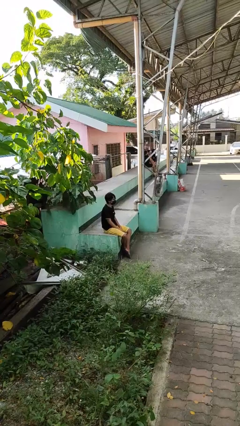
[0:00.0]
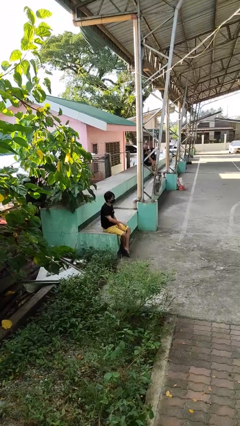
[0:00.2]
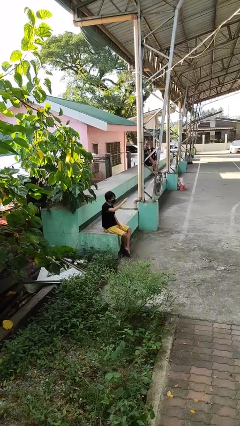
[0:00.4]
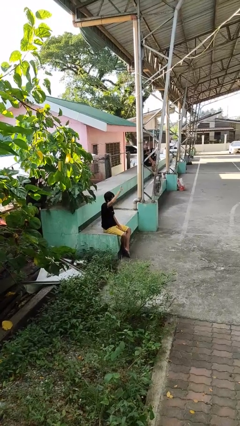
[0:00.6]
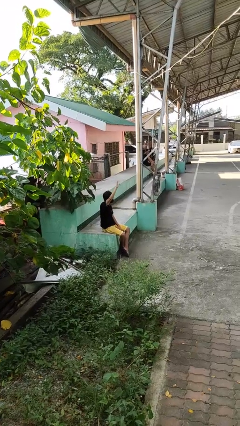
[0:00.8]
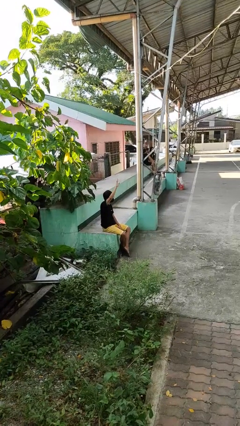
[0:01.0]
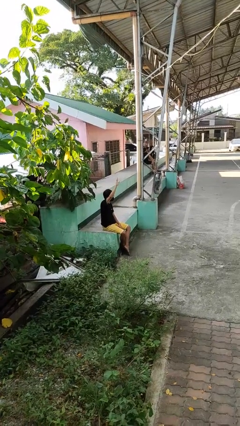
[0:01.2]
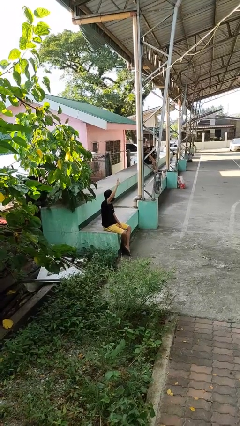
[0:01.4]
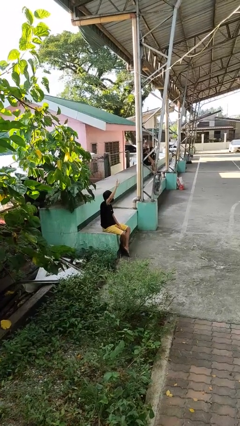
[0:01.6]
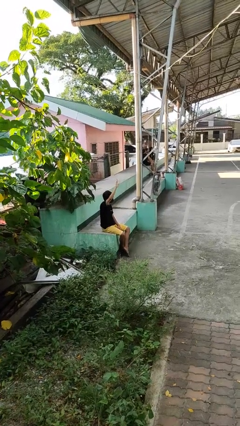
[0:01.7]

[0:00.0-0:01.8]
person gestures raise hand

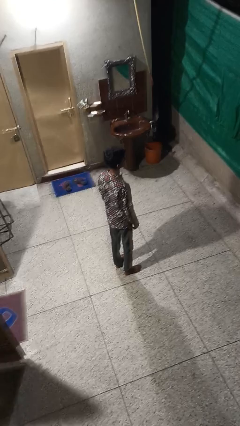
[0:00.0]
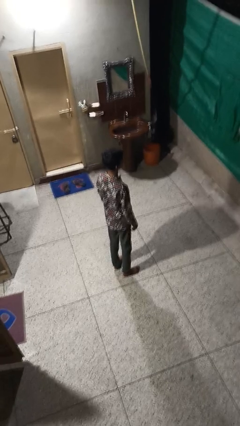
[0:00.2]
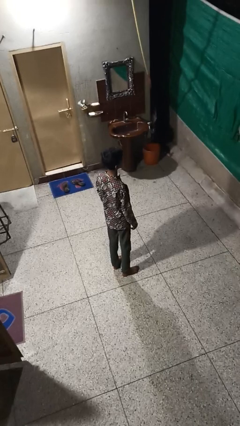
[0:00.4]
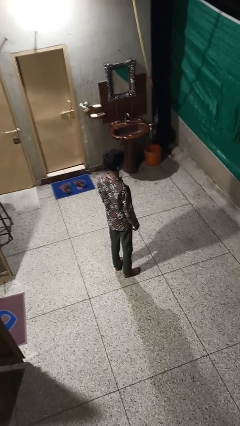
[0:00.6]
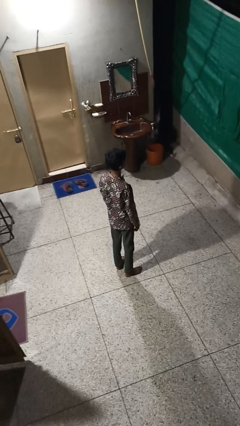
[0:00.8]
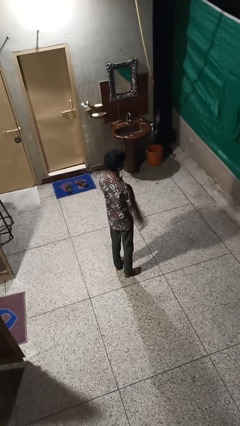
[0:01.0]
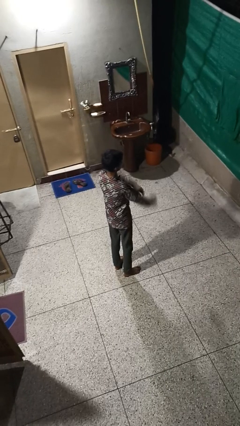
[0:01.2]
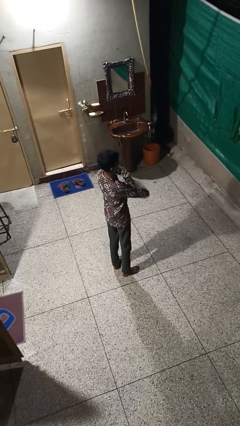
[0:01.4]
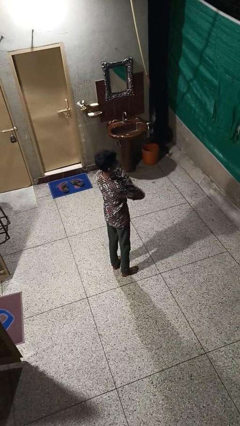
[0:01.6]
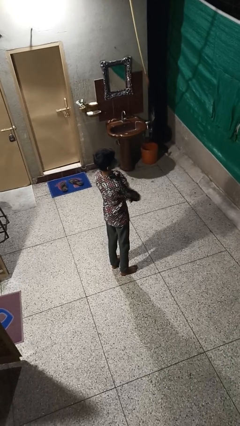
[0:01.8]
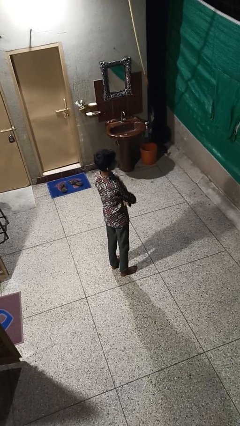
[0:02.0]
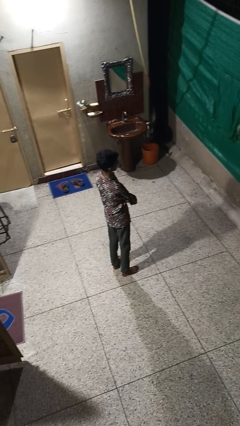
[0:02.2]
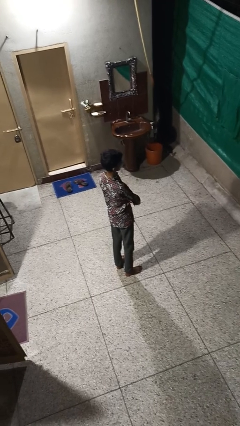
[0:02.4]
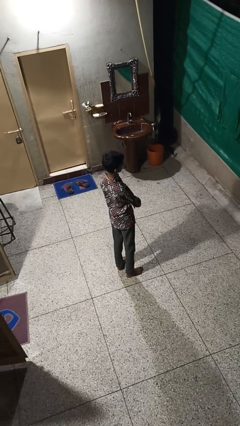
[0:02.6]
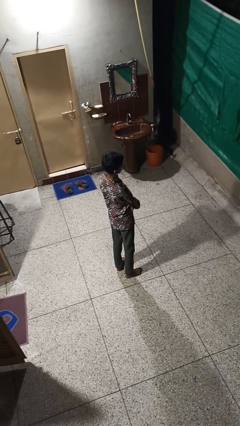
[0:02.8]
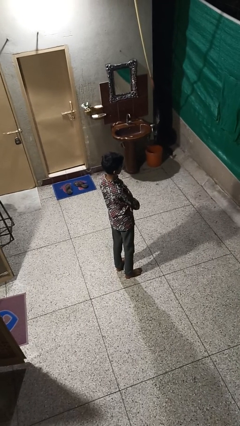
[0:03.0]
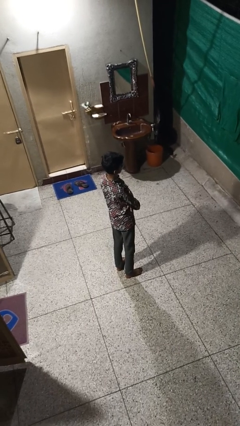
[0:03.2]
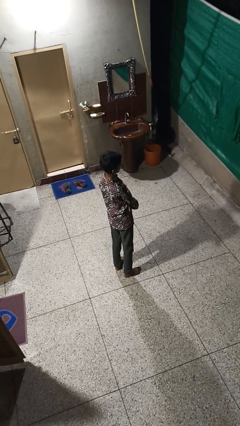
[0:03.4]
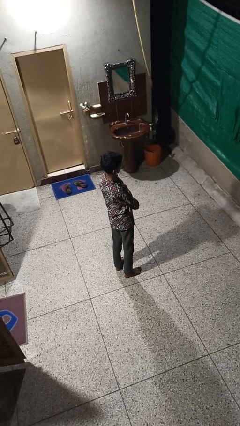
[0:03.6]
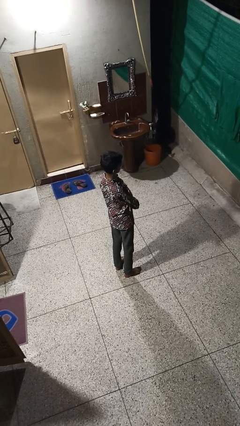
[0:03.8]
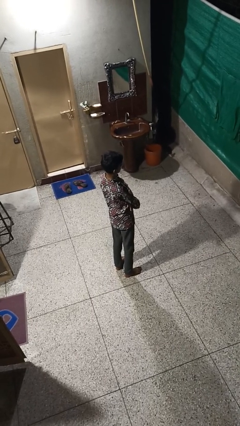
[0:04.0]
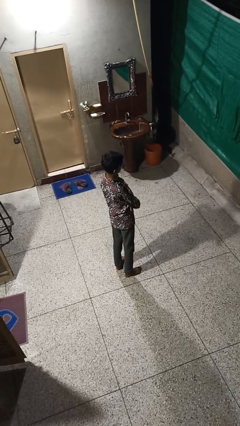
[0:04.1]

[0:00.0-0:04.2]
person crosses arms

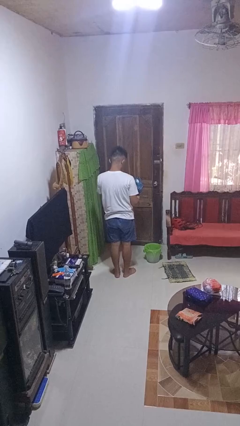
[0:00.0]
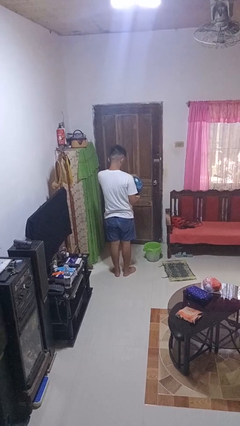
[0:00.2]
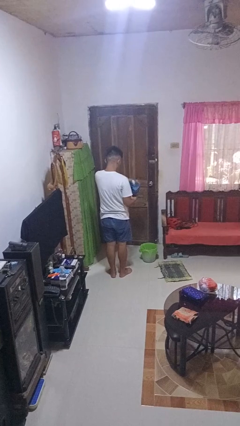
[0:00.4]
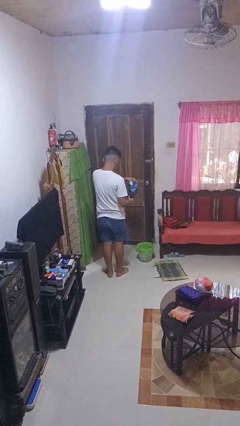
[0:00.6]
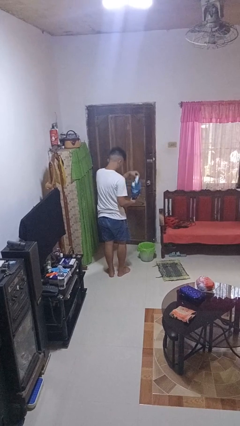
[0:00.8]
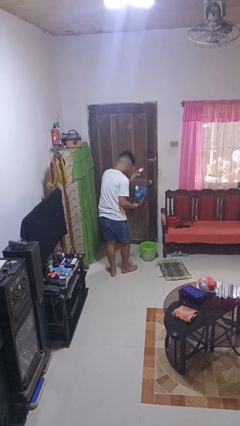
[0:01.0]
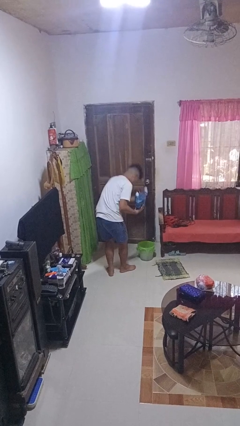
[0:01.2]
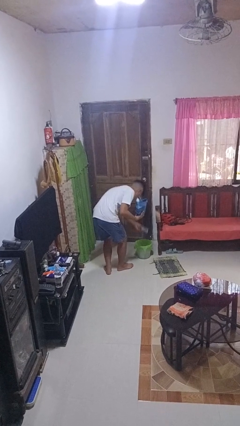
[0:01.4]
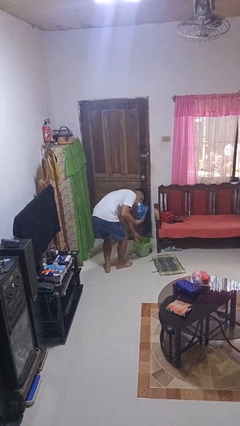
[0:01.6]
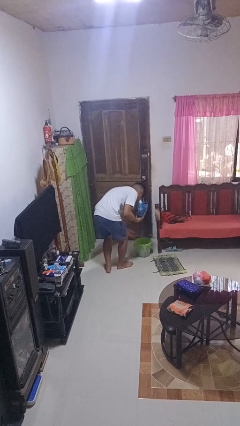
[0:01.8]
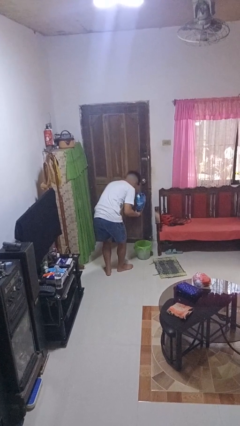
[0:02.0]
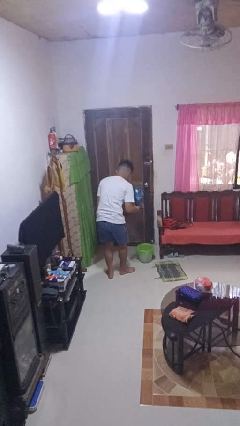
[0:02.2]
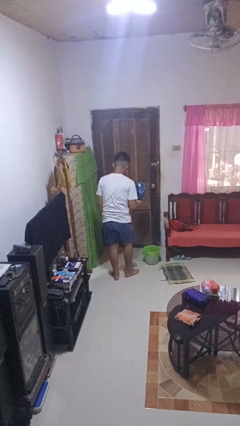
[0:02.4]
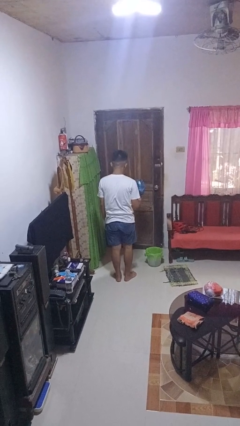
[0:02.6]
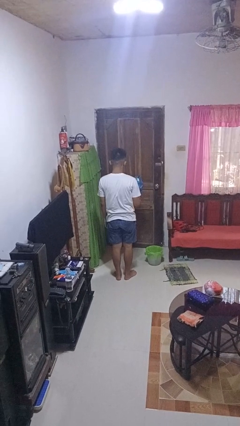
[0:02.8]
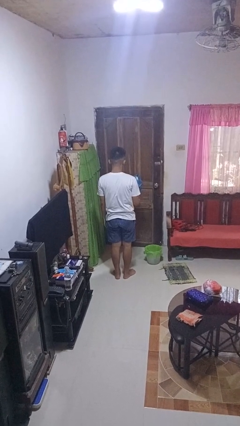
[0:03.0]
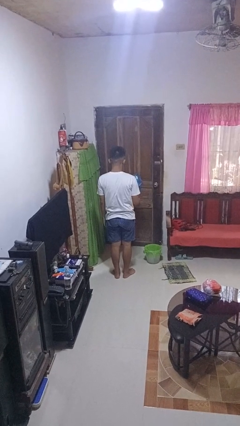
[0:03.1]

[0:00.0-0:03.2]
person discards trash

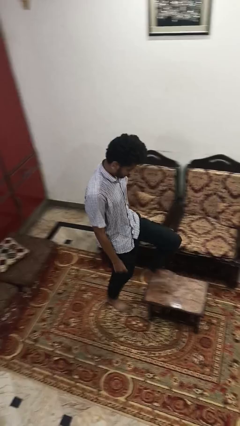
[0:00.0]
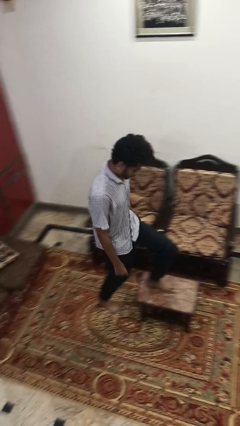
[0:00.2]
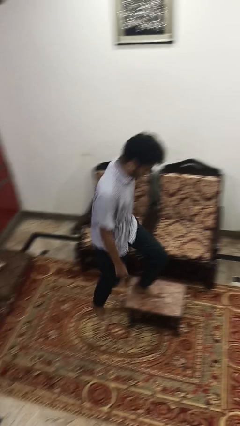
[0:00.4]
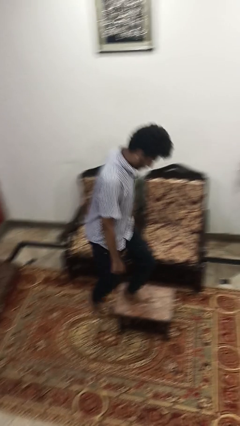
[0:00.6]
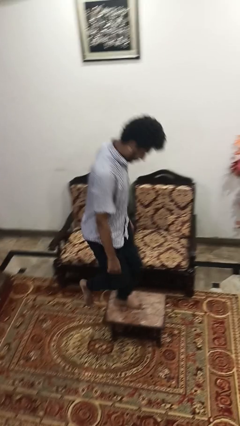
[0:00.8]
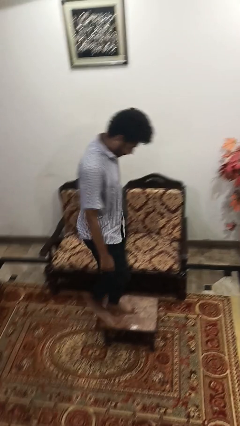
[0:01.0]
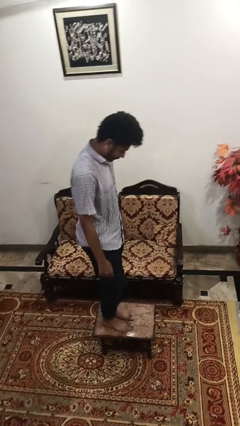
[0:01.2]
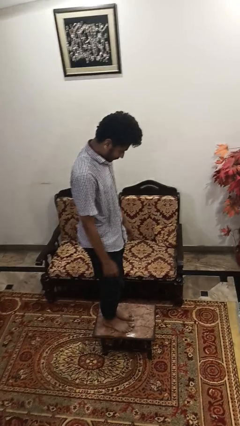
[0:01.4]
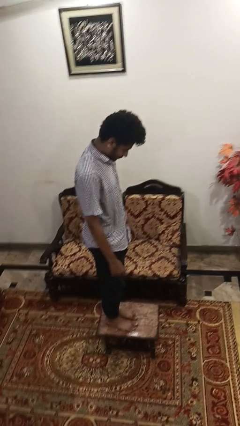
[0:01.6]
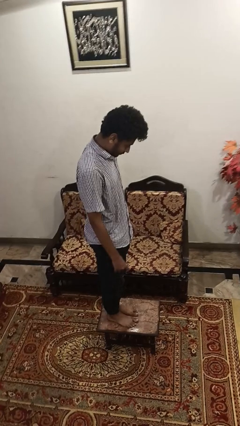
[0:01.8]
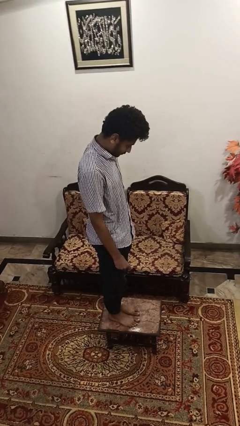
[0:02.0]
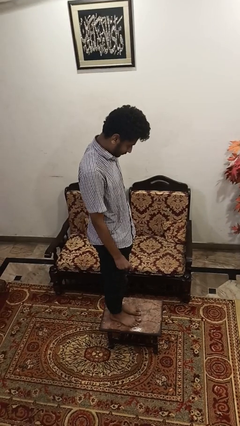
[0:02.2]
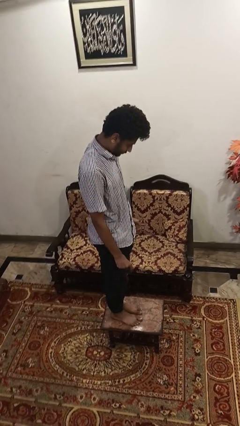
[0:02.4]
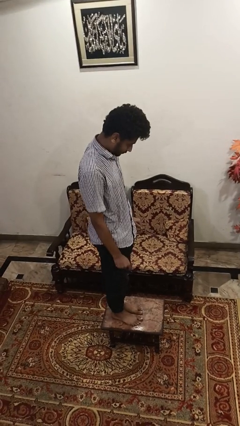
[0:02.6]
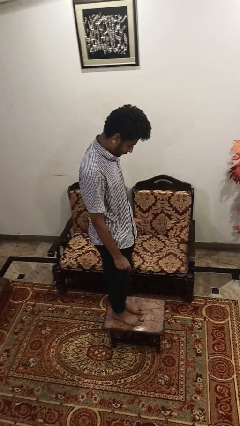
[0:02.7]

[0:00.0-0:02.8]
person climbs on table

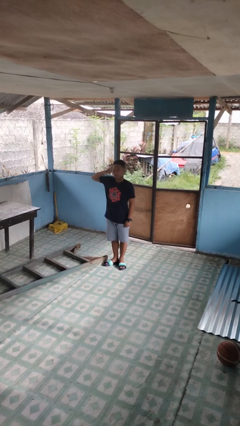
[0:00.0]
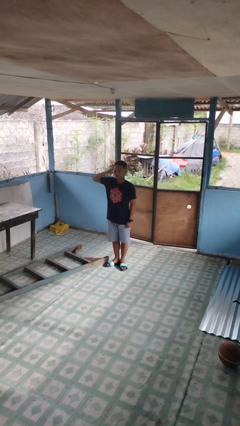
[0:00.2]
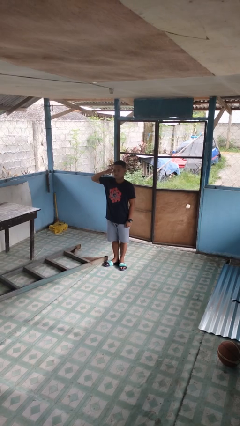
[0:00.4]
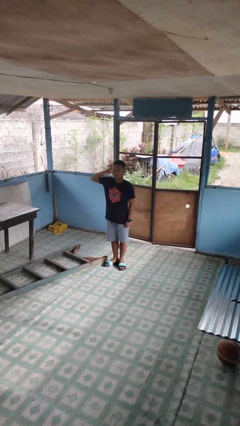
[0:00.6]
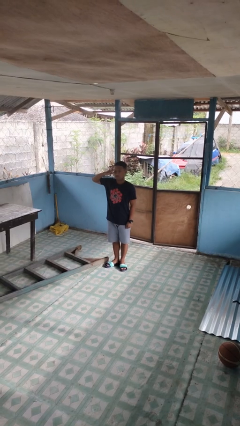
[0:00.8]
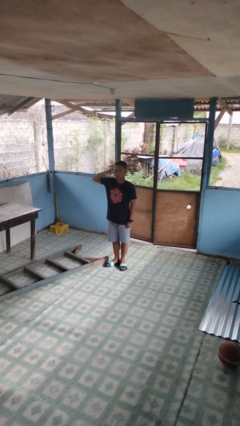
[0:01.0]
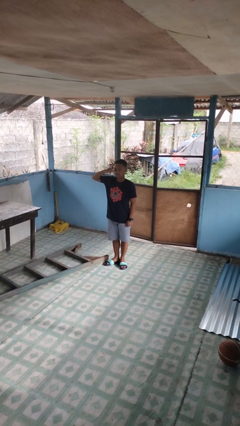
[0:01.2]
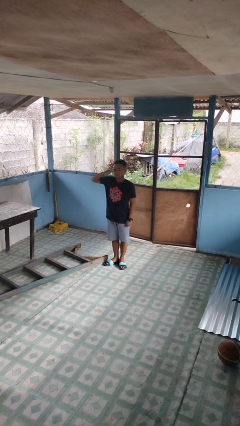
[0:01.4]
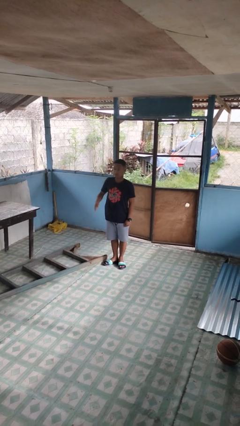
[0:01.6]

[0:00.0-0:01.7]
person salutes

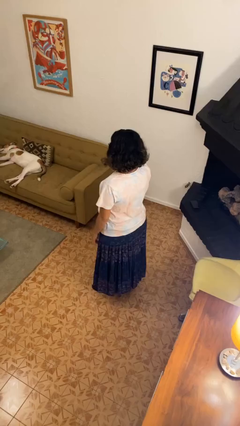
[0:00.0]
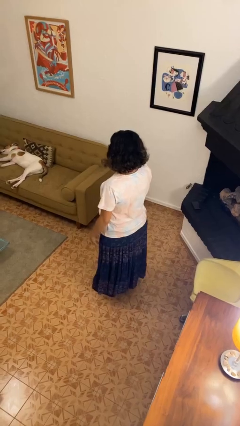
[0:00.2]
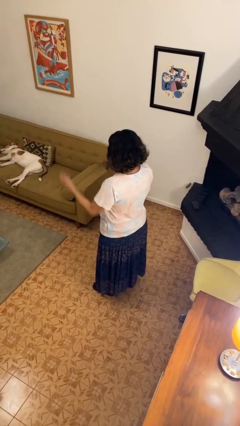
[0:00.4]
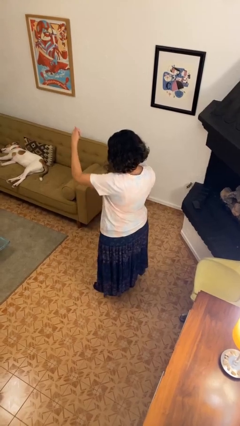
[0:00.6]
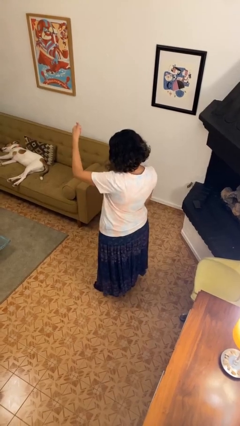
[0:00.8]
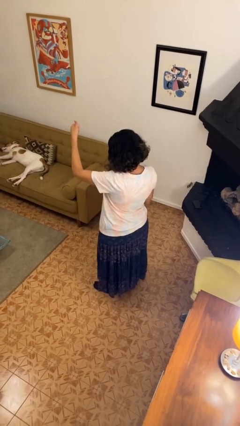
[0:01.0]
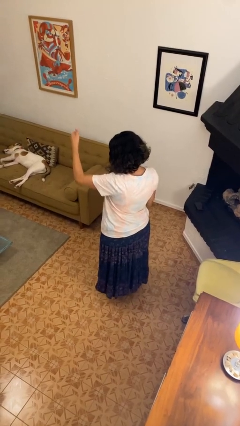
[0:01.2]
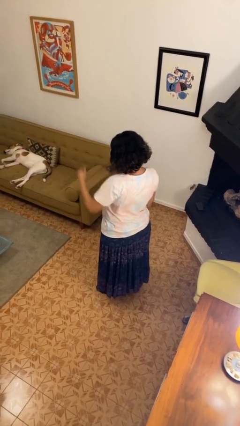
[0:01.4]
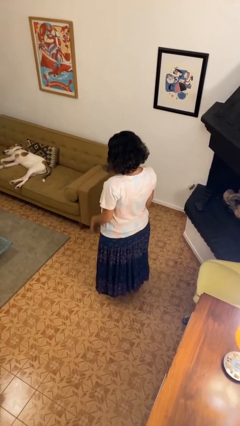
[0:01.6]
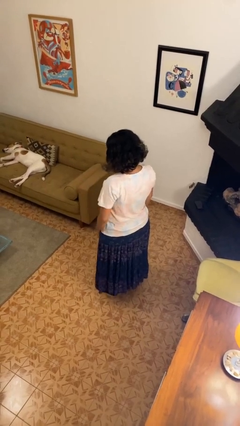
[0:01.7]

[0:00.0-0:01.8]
person gestures thumbs up

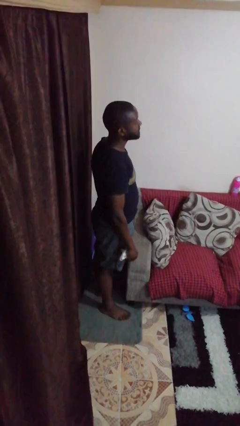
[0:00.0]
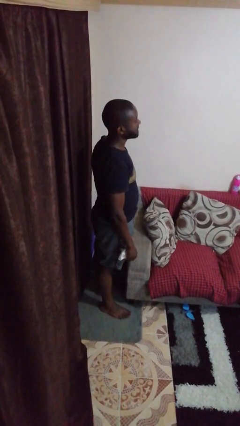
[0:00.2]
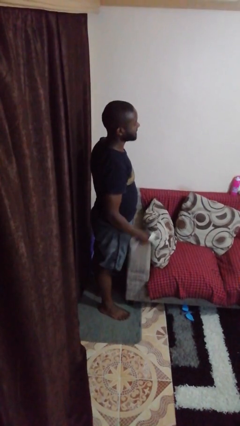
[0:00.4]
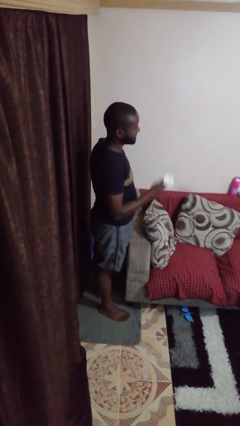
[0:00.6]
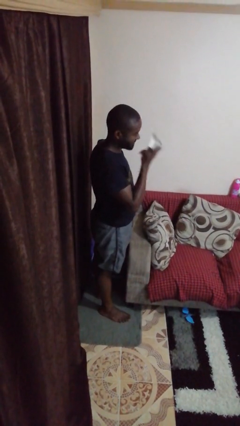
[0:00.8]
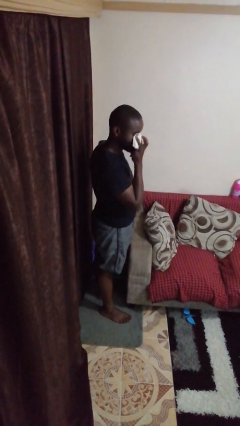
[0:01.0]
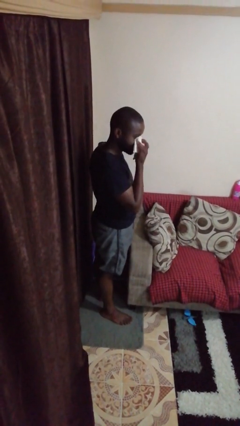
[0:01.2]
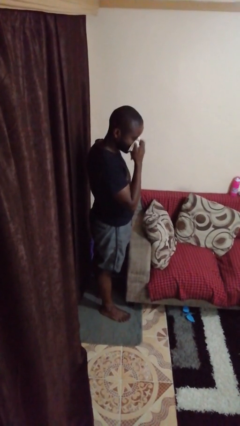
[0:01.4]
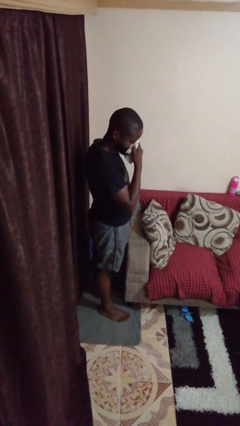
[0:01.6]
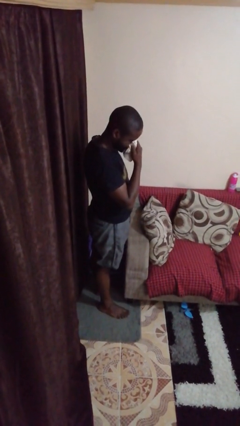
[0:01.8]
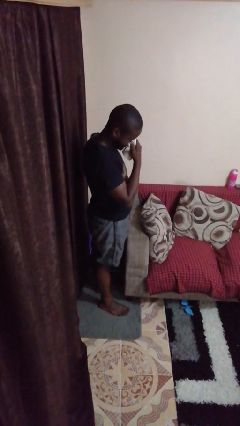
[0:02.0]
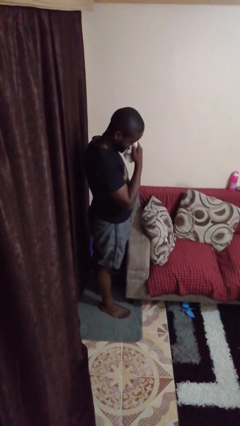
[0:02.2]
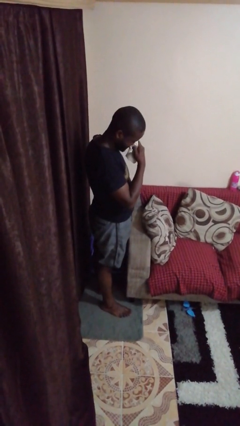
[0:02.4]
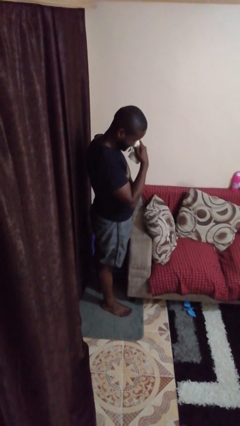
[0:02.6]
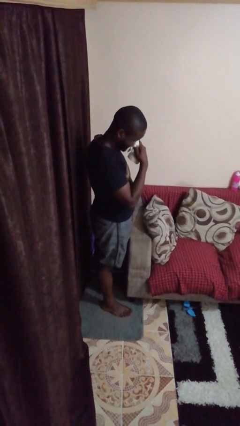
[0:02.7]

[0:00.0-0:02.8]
person blows nose
